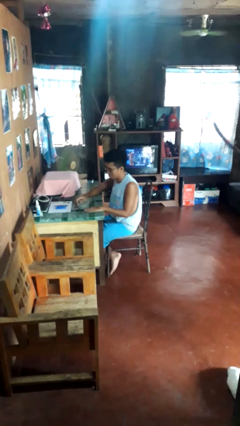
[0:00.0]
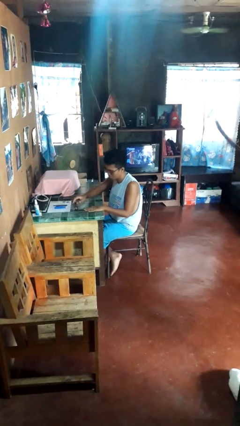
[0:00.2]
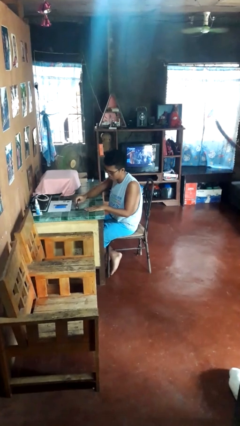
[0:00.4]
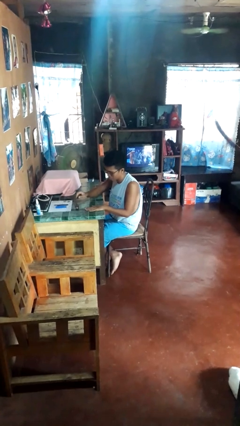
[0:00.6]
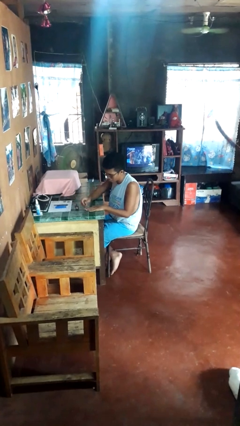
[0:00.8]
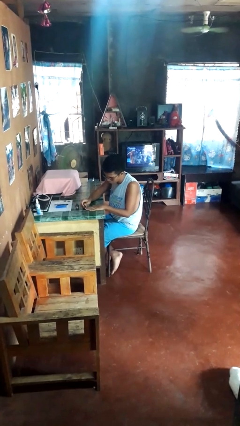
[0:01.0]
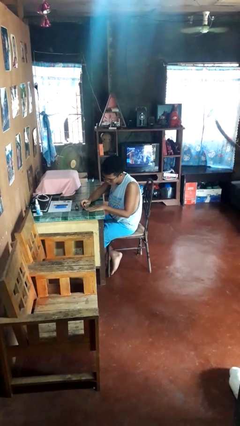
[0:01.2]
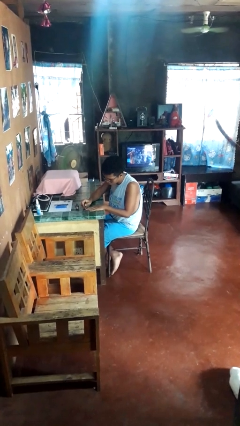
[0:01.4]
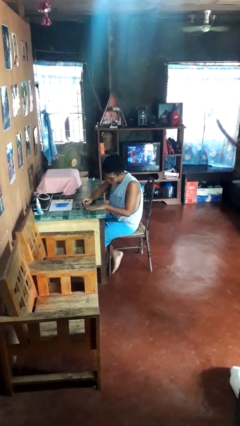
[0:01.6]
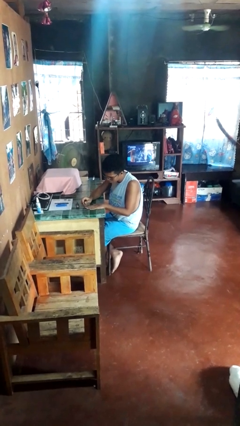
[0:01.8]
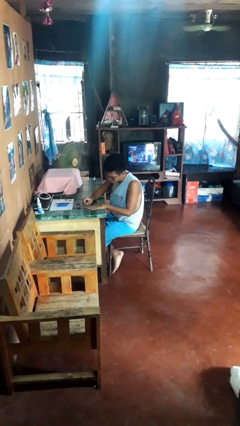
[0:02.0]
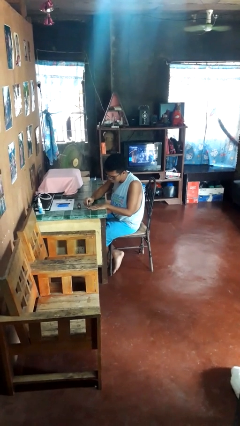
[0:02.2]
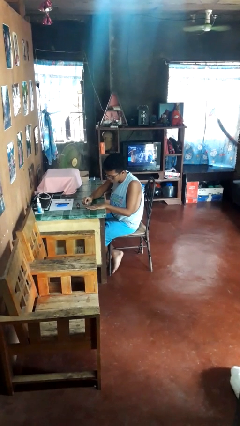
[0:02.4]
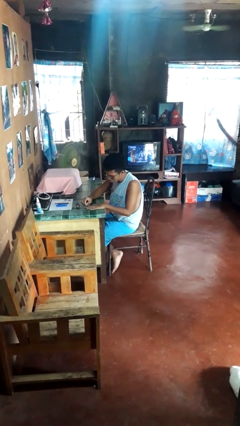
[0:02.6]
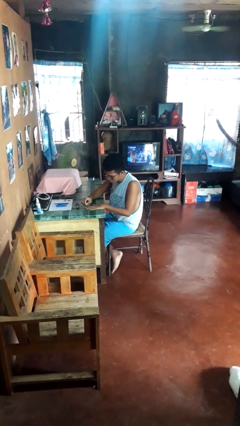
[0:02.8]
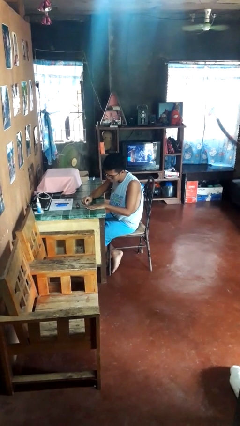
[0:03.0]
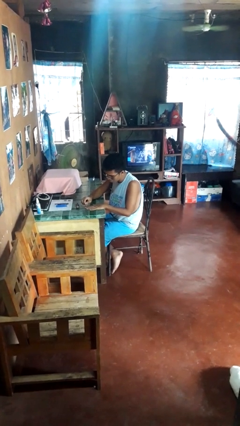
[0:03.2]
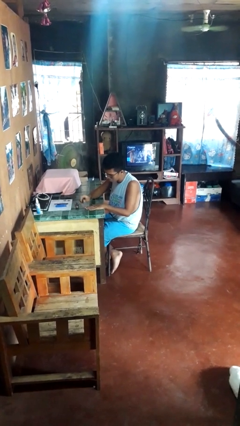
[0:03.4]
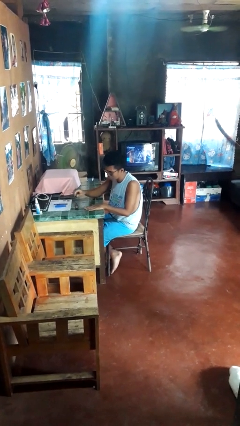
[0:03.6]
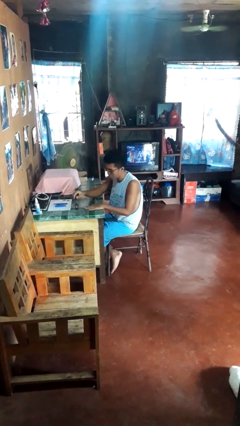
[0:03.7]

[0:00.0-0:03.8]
person paints fingernails

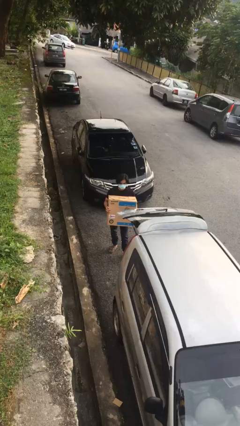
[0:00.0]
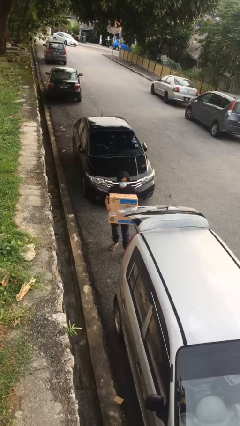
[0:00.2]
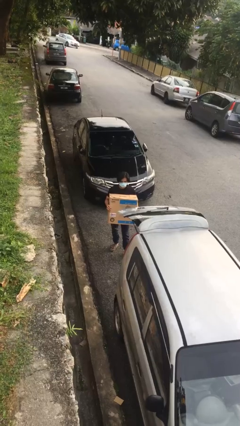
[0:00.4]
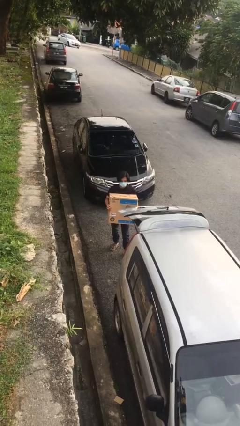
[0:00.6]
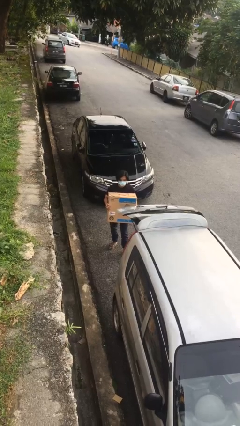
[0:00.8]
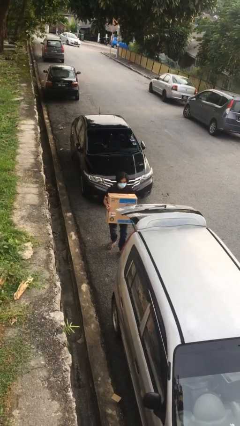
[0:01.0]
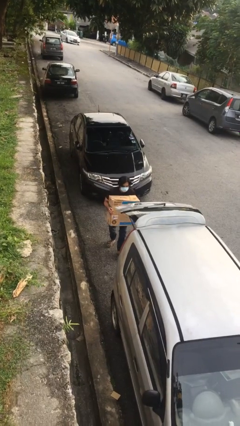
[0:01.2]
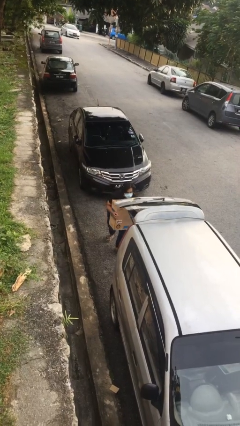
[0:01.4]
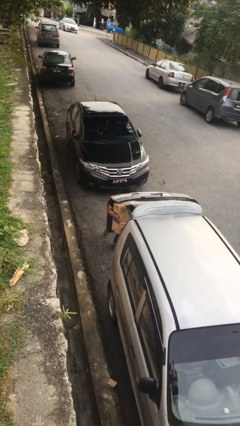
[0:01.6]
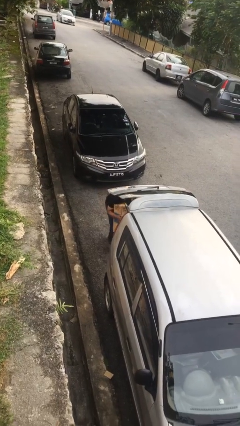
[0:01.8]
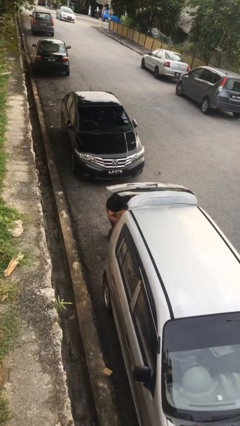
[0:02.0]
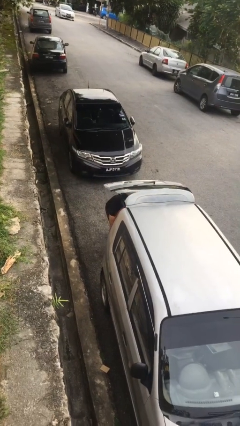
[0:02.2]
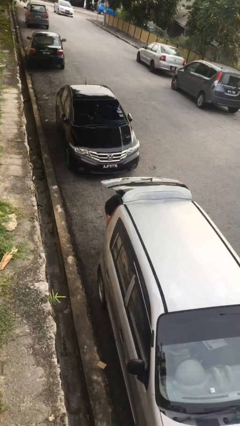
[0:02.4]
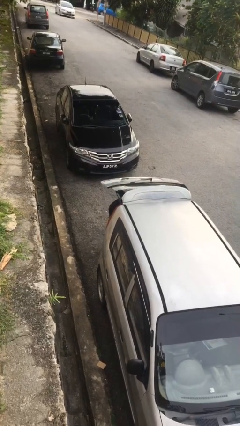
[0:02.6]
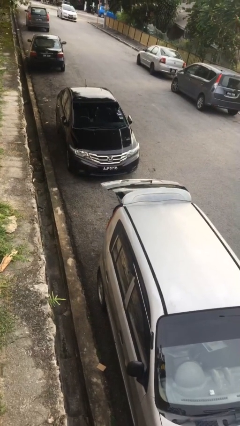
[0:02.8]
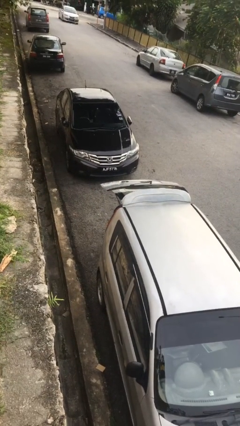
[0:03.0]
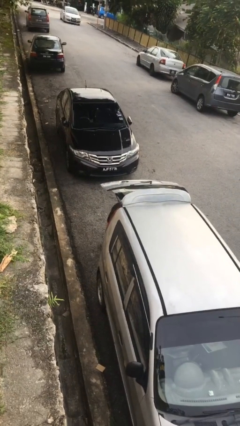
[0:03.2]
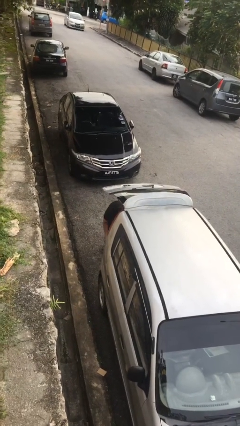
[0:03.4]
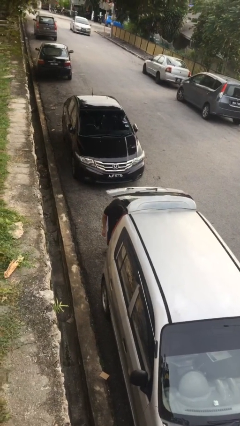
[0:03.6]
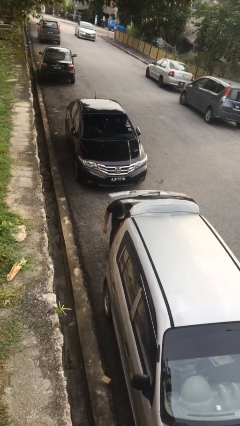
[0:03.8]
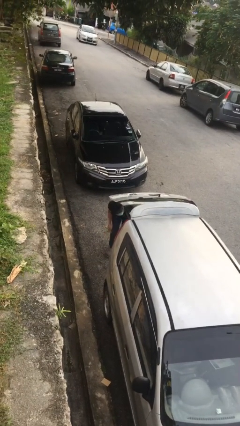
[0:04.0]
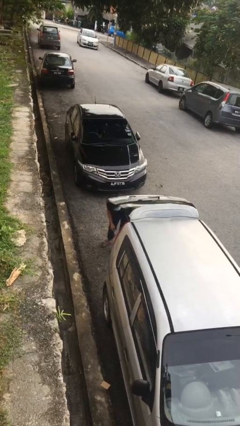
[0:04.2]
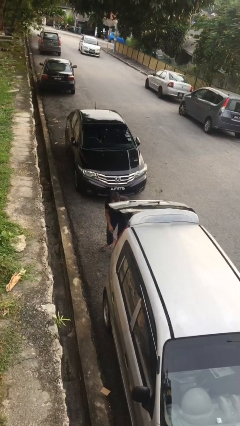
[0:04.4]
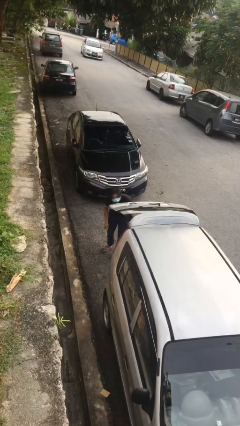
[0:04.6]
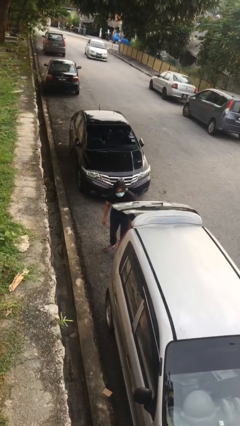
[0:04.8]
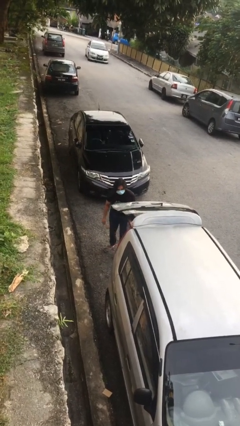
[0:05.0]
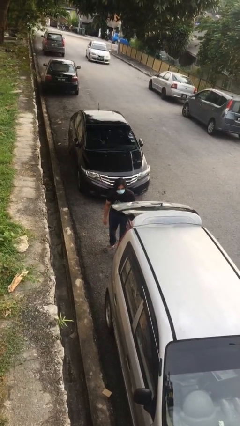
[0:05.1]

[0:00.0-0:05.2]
person loads car

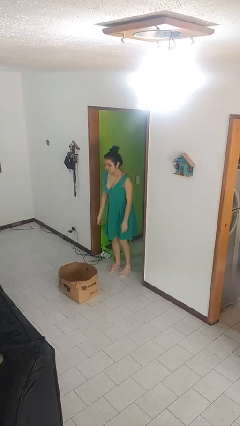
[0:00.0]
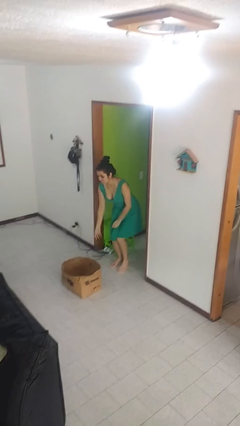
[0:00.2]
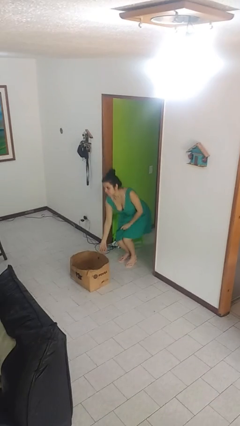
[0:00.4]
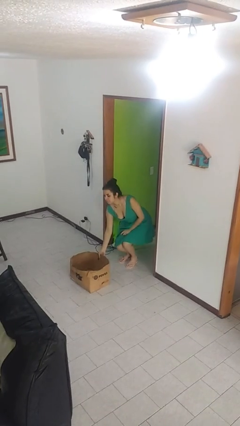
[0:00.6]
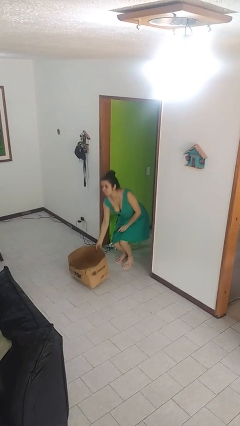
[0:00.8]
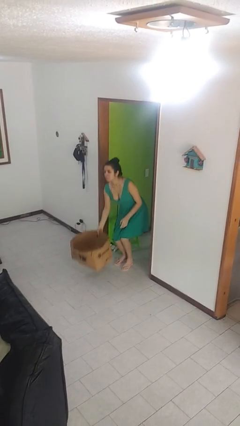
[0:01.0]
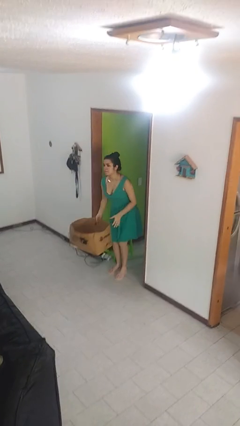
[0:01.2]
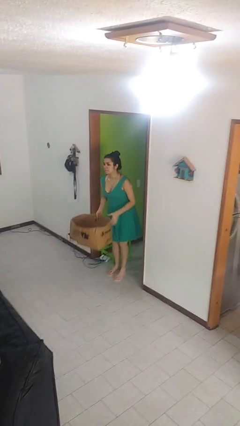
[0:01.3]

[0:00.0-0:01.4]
person picks up object from floor

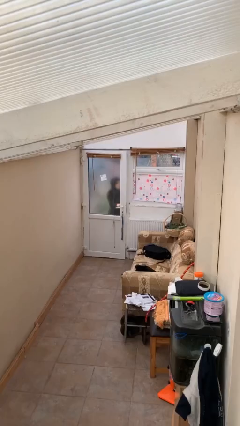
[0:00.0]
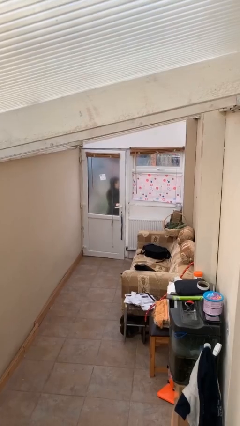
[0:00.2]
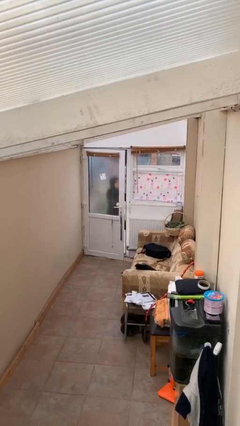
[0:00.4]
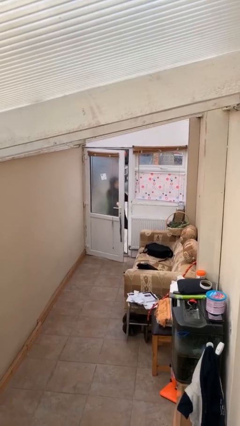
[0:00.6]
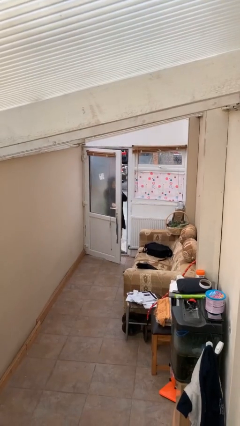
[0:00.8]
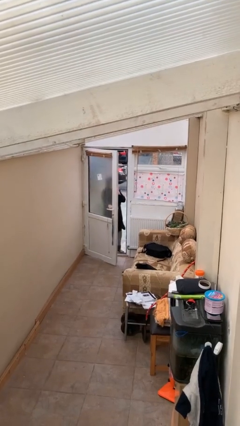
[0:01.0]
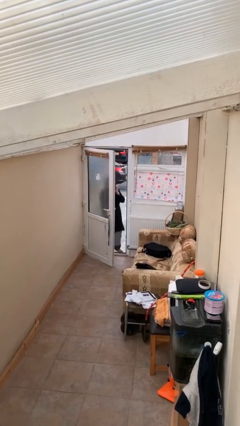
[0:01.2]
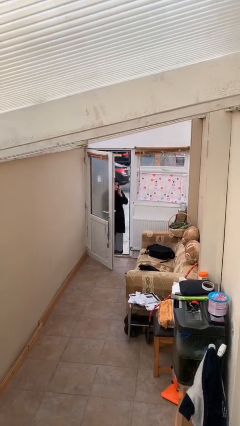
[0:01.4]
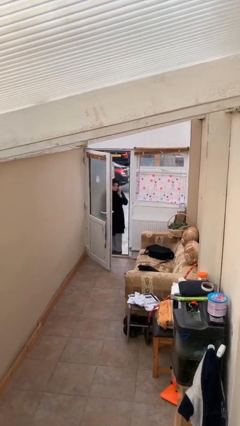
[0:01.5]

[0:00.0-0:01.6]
person opens facility door

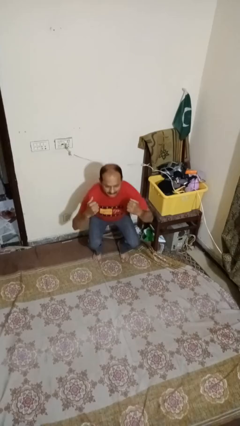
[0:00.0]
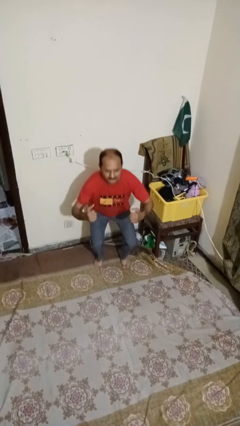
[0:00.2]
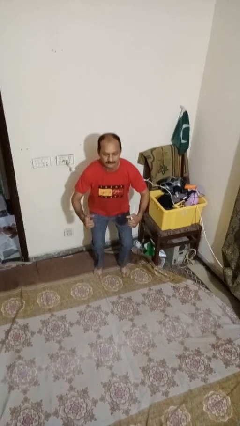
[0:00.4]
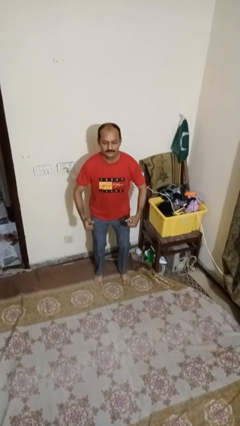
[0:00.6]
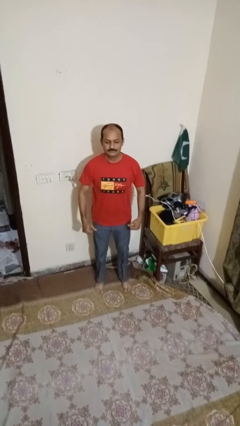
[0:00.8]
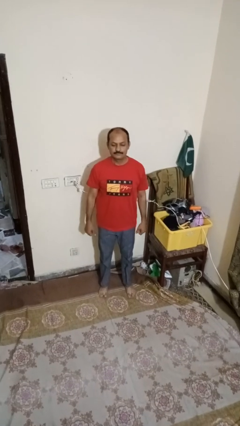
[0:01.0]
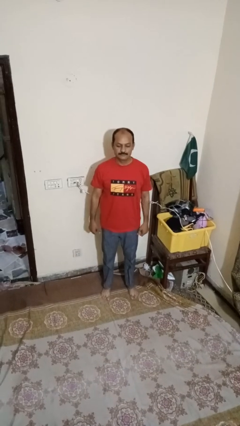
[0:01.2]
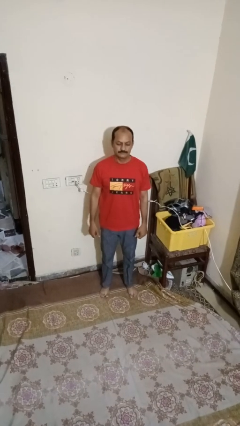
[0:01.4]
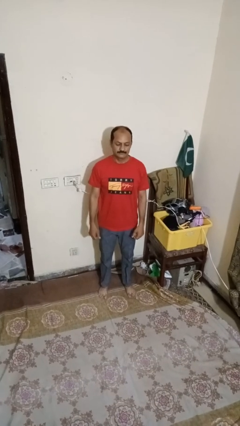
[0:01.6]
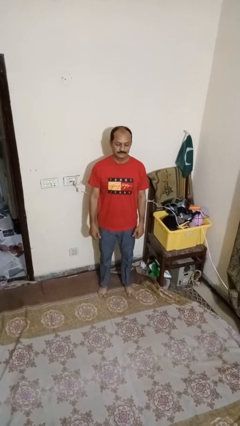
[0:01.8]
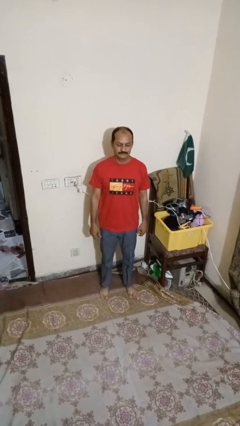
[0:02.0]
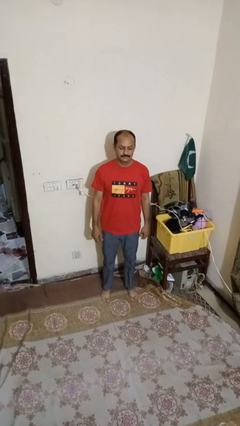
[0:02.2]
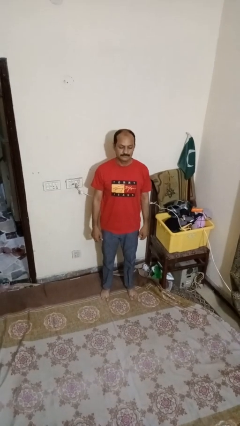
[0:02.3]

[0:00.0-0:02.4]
person stands up

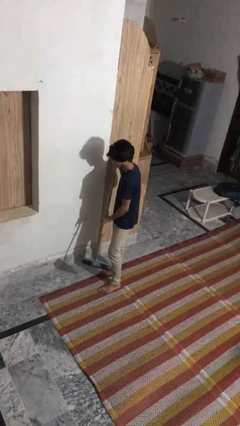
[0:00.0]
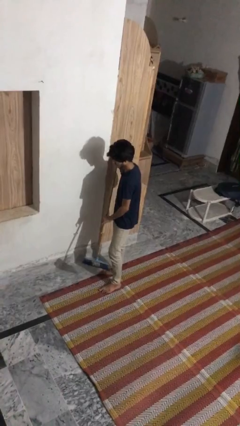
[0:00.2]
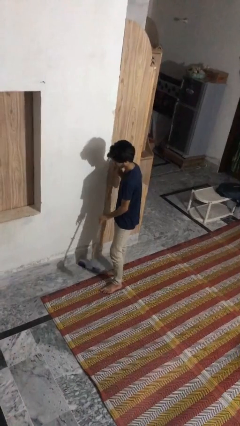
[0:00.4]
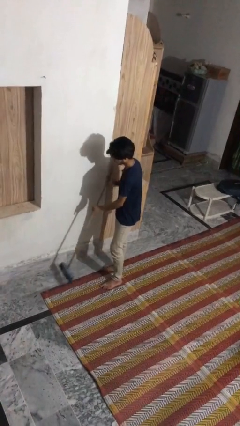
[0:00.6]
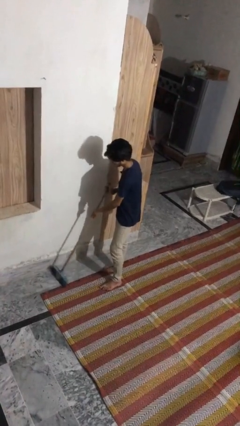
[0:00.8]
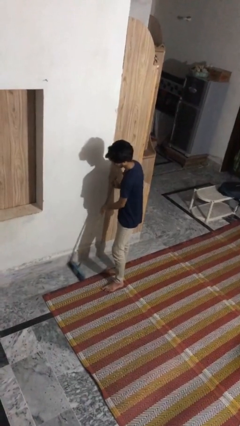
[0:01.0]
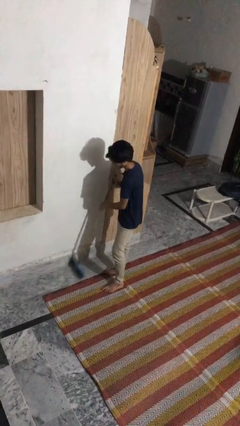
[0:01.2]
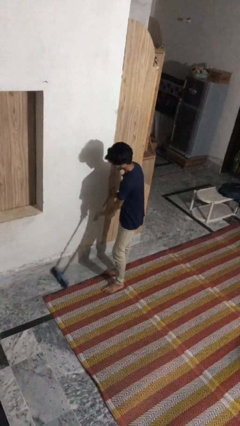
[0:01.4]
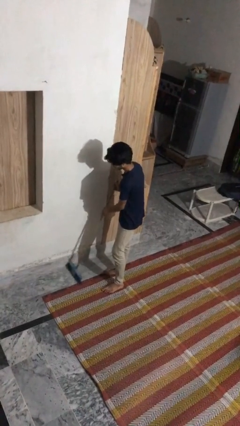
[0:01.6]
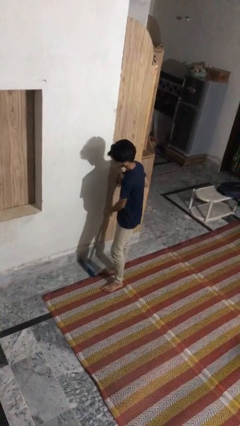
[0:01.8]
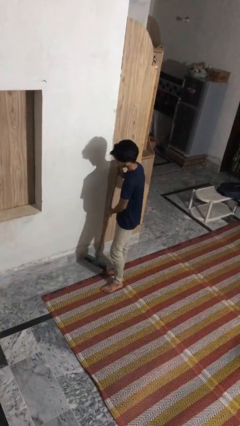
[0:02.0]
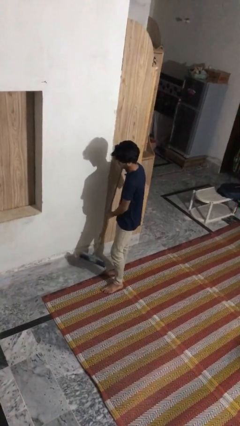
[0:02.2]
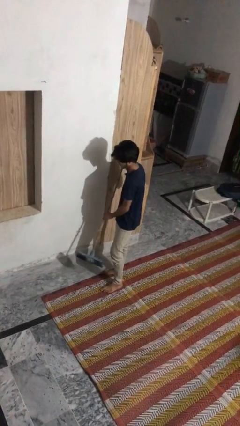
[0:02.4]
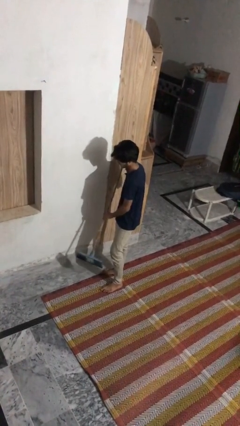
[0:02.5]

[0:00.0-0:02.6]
person sweeps floor

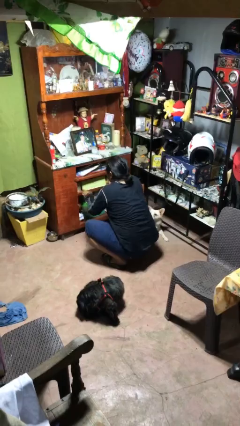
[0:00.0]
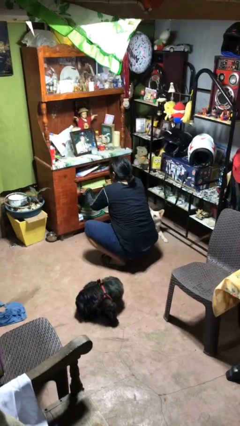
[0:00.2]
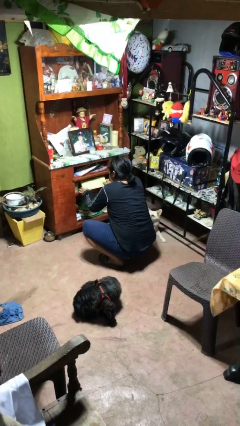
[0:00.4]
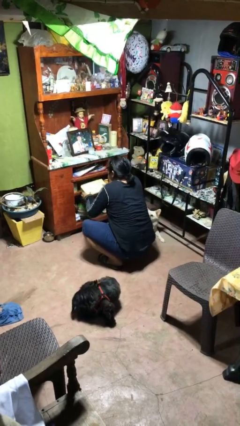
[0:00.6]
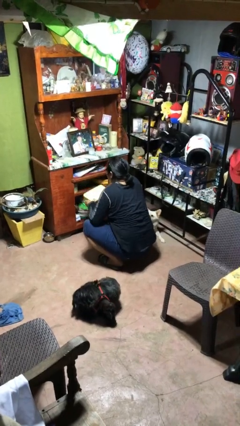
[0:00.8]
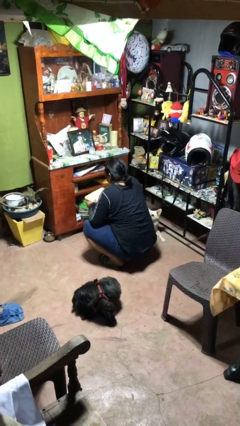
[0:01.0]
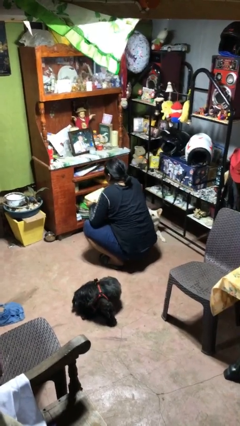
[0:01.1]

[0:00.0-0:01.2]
person picks up object from cabinet
